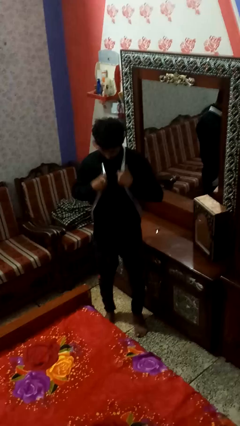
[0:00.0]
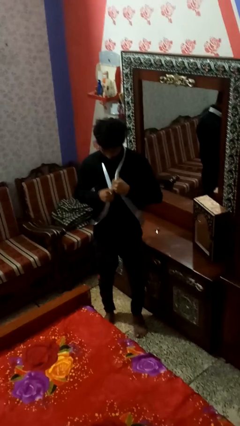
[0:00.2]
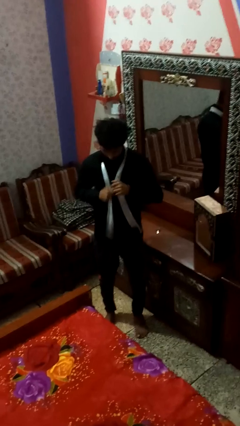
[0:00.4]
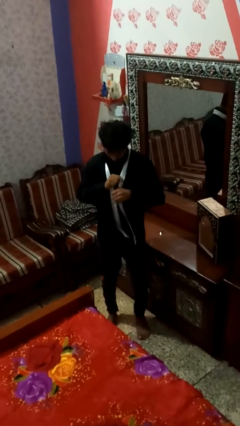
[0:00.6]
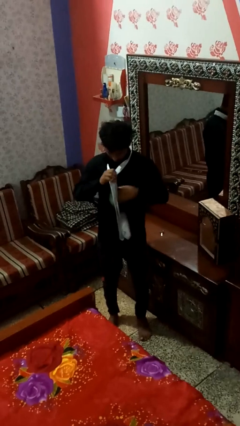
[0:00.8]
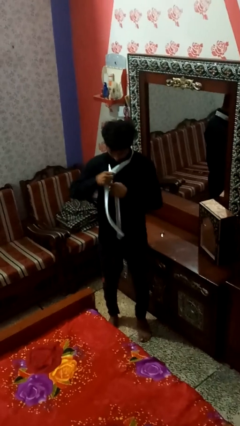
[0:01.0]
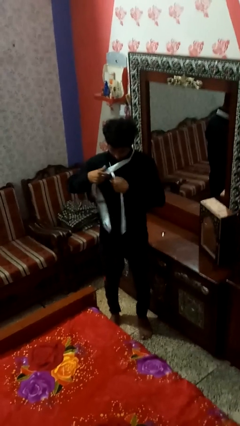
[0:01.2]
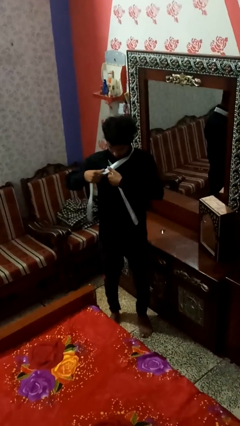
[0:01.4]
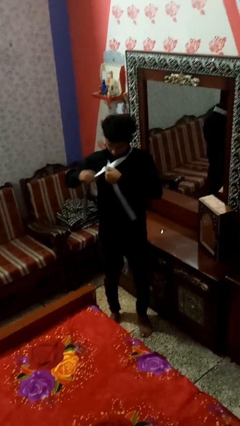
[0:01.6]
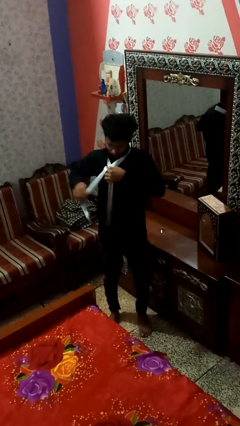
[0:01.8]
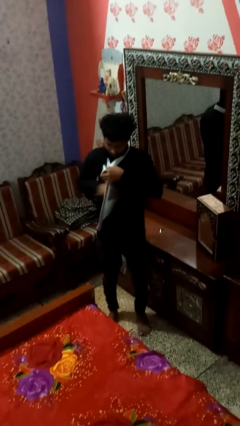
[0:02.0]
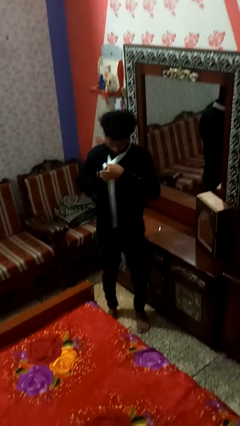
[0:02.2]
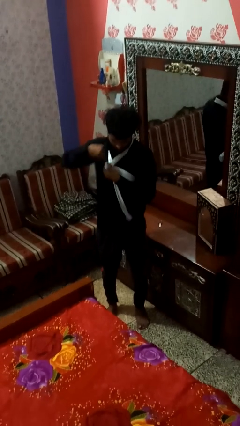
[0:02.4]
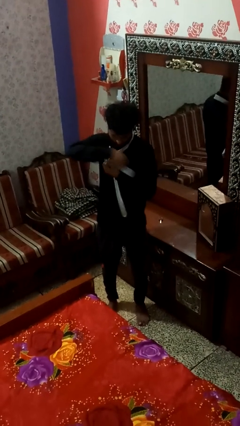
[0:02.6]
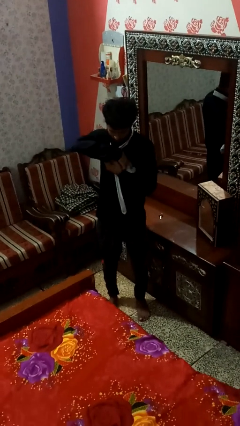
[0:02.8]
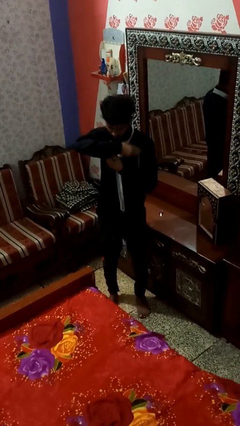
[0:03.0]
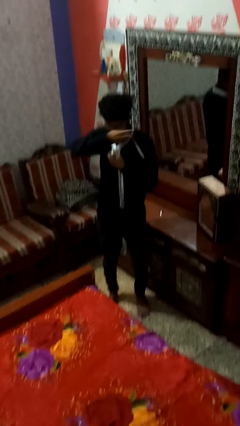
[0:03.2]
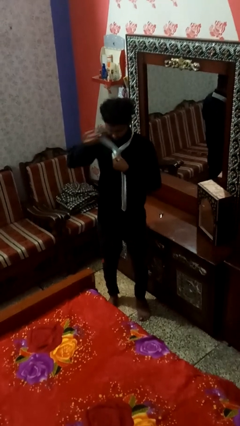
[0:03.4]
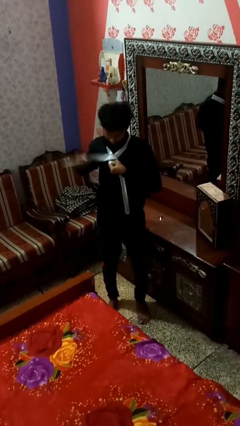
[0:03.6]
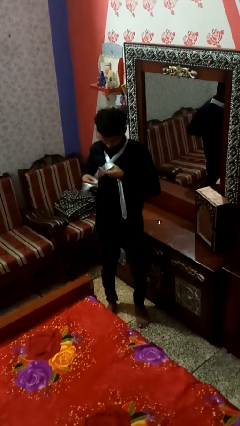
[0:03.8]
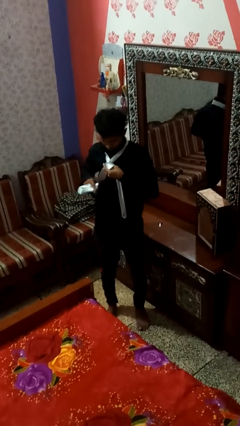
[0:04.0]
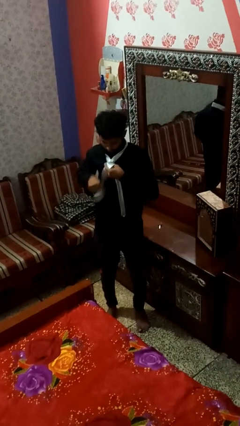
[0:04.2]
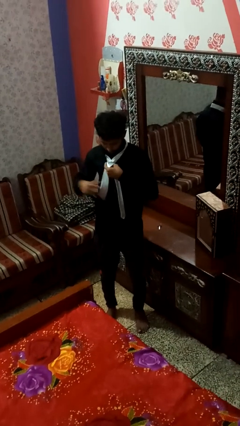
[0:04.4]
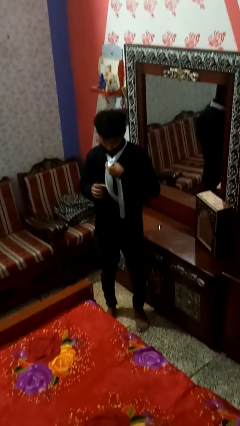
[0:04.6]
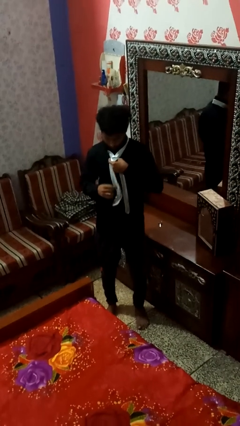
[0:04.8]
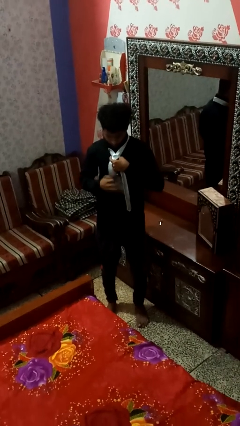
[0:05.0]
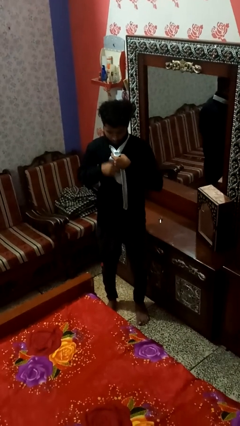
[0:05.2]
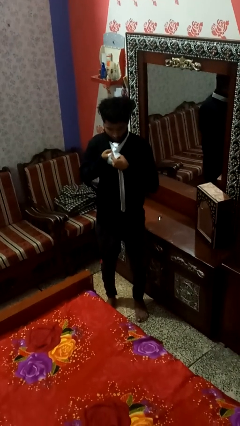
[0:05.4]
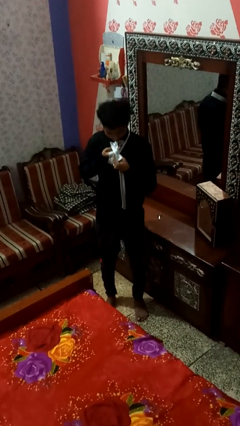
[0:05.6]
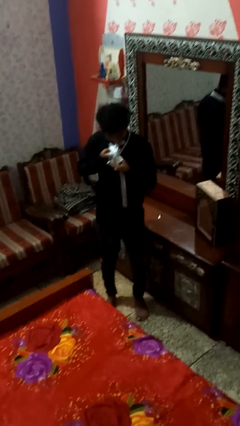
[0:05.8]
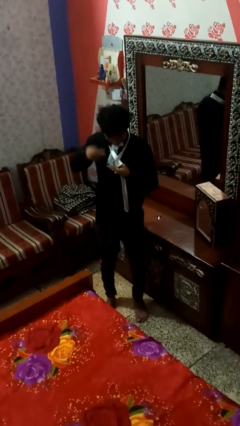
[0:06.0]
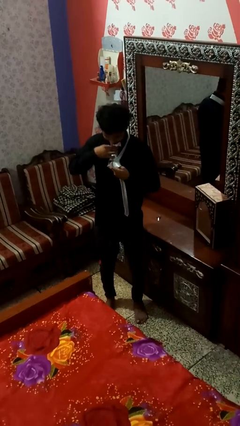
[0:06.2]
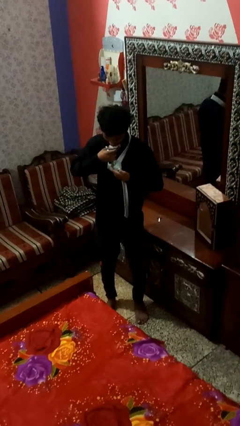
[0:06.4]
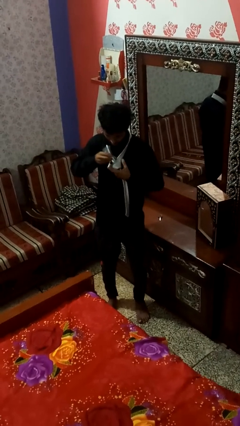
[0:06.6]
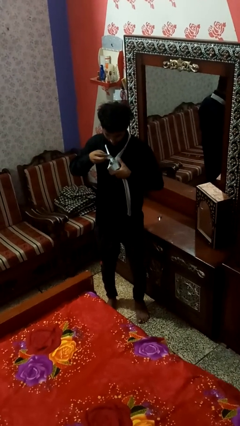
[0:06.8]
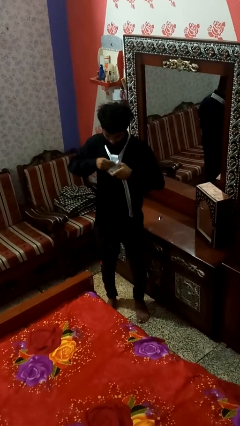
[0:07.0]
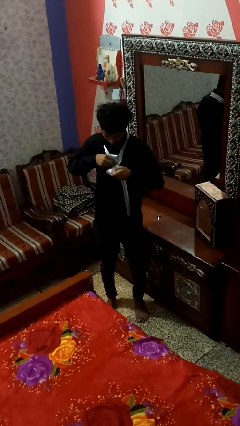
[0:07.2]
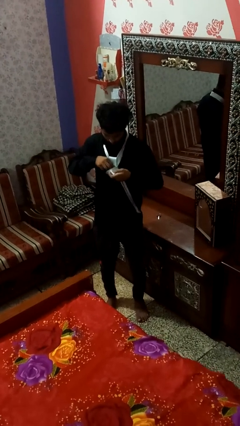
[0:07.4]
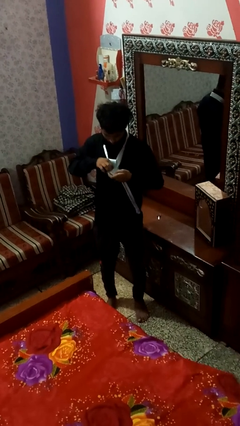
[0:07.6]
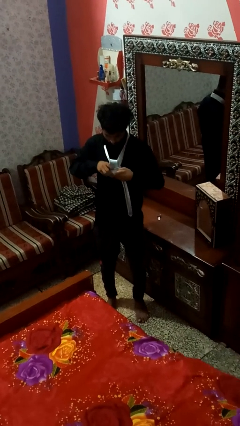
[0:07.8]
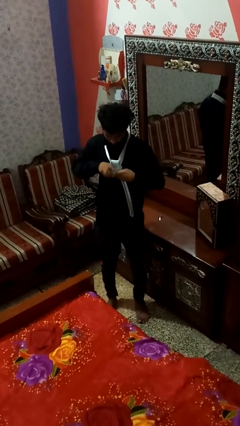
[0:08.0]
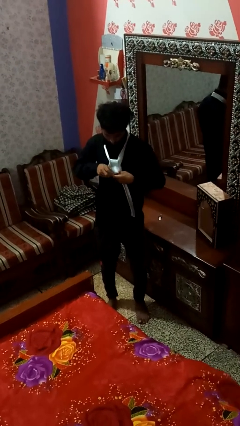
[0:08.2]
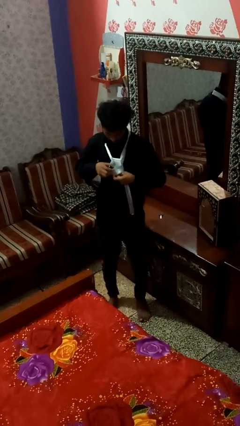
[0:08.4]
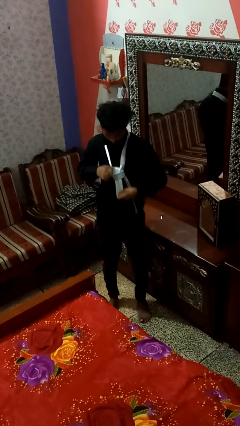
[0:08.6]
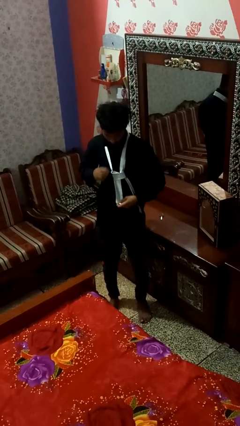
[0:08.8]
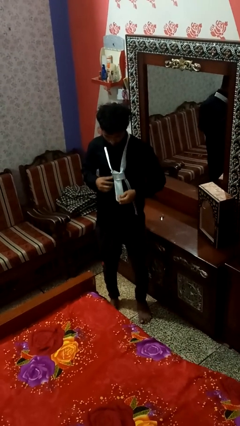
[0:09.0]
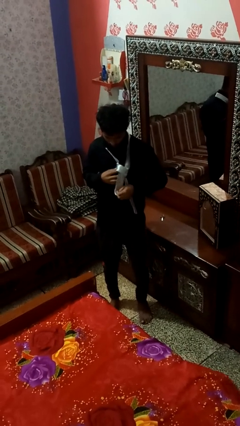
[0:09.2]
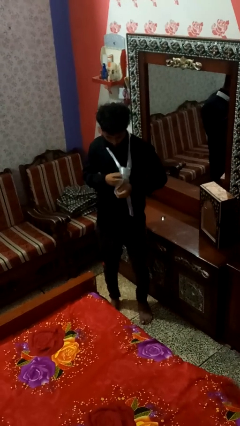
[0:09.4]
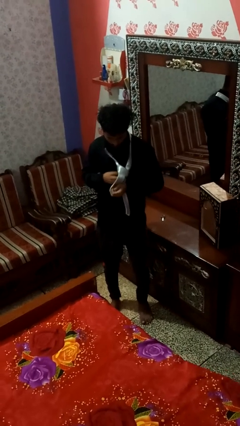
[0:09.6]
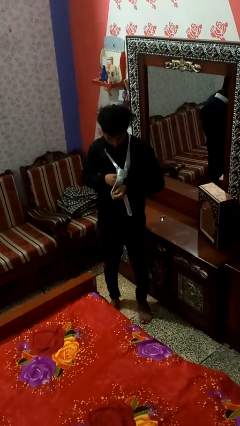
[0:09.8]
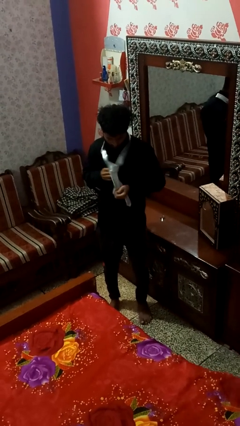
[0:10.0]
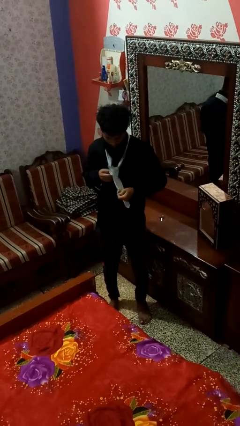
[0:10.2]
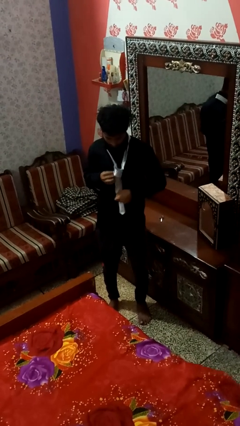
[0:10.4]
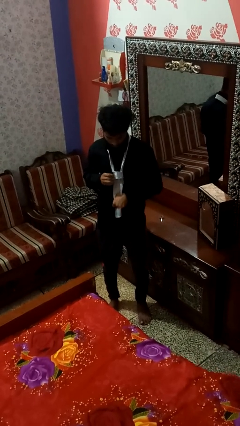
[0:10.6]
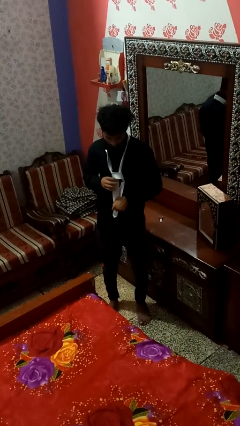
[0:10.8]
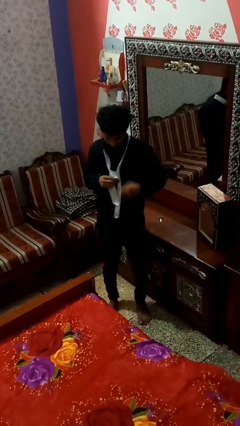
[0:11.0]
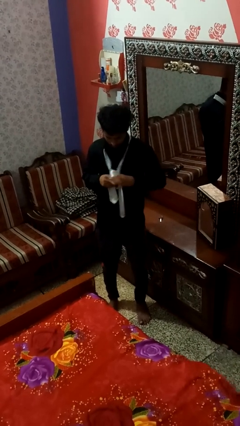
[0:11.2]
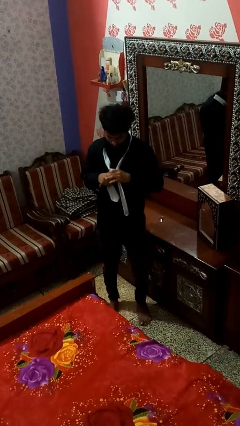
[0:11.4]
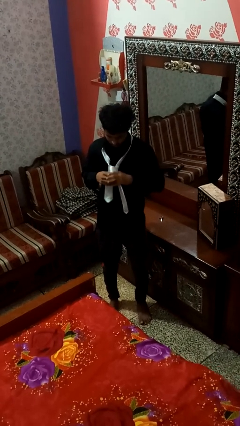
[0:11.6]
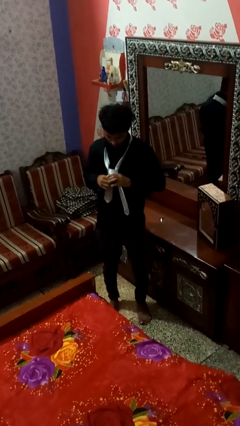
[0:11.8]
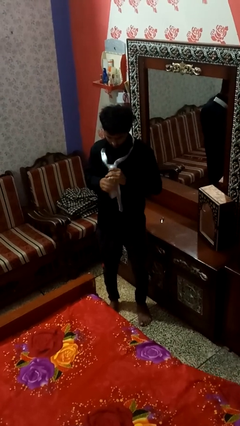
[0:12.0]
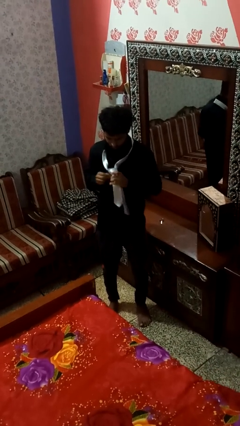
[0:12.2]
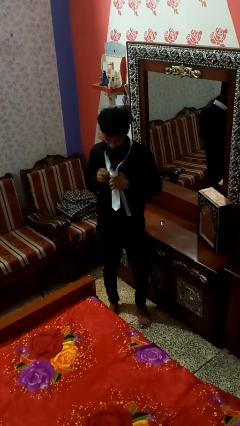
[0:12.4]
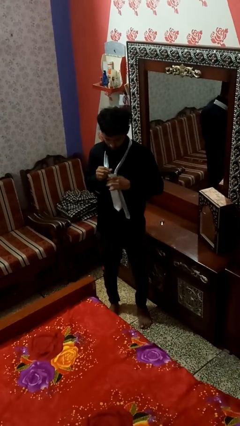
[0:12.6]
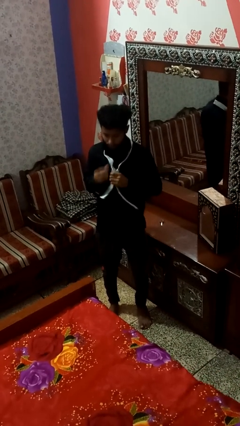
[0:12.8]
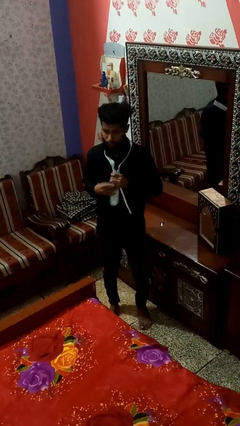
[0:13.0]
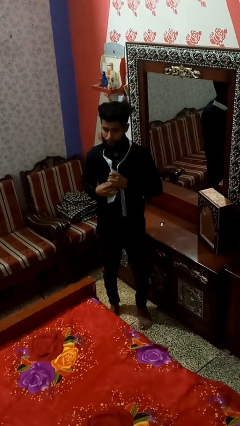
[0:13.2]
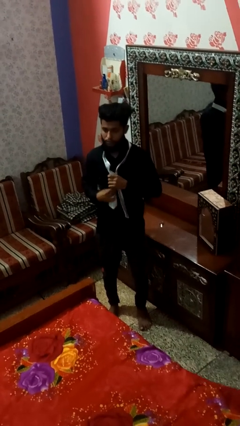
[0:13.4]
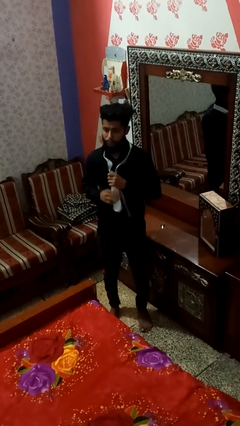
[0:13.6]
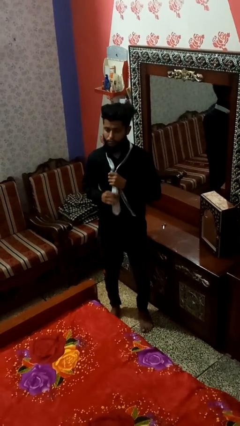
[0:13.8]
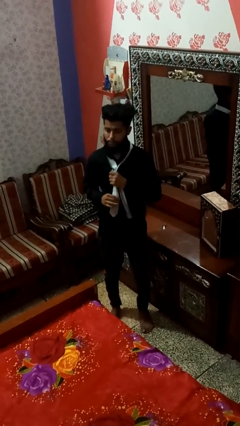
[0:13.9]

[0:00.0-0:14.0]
person puts on necktie

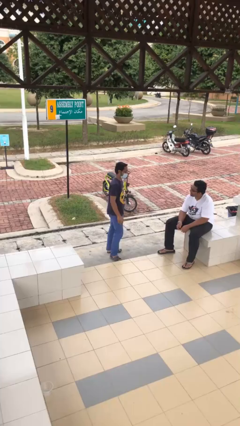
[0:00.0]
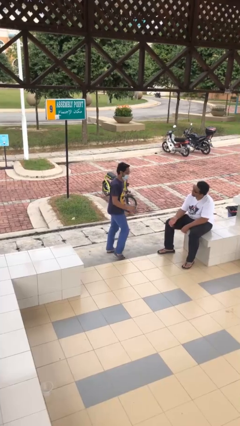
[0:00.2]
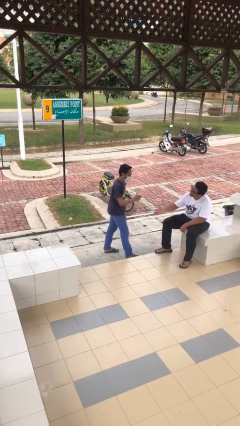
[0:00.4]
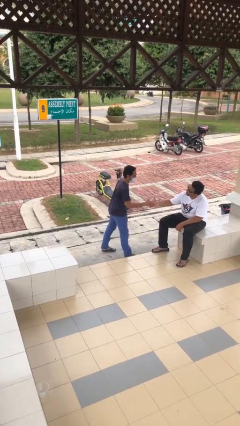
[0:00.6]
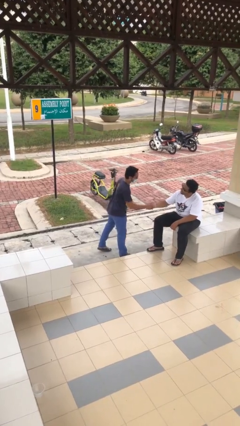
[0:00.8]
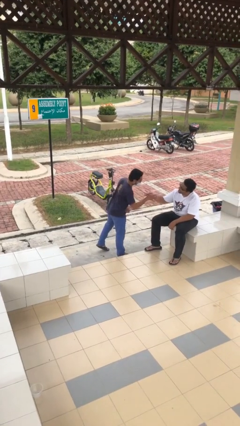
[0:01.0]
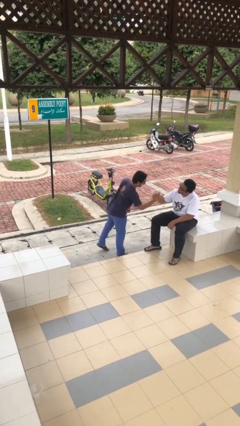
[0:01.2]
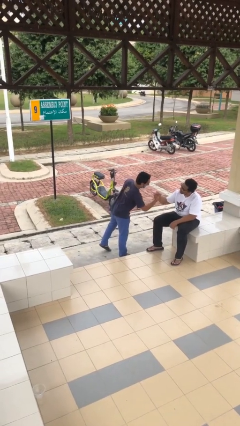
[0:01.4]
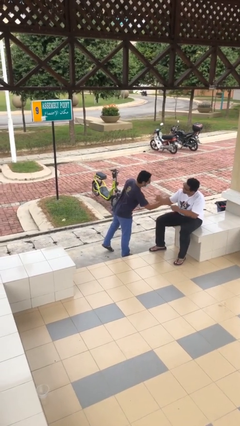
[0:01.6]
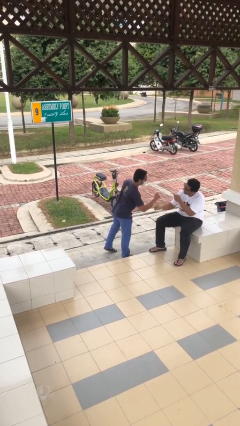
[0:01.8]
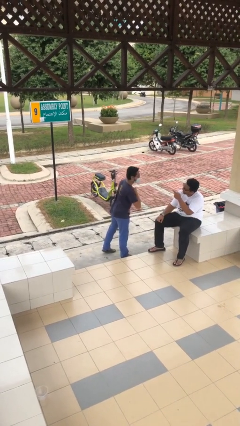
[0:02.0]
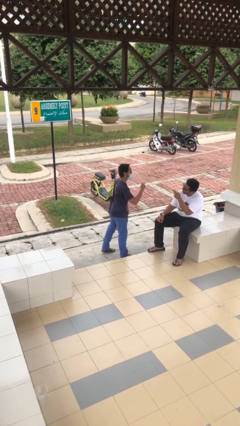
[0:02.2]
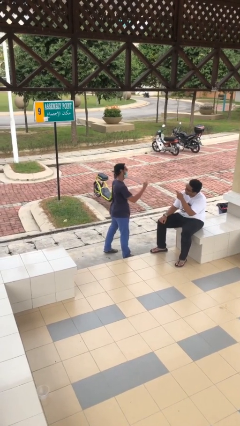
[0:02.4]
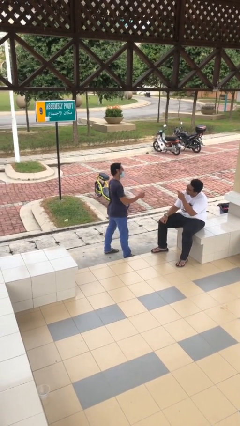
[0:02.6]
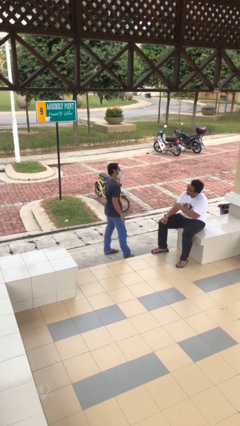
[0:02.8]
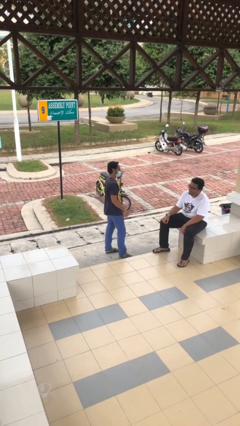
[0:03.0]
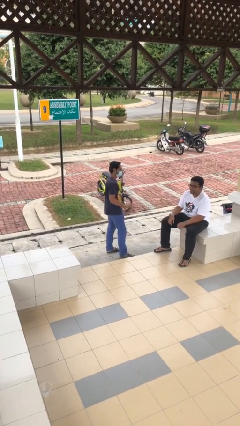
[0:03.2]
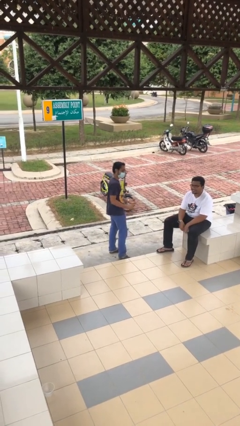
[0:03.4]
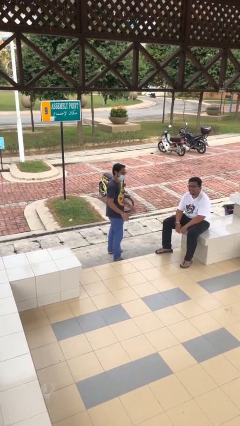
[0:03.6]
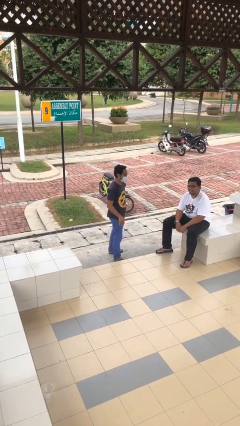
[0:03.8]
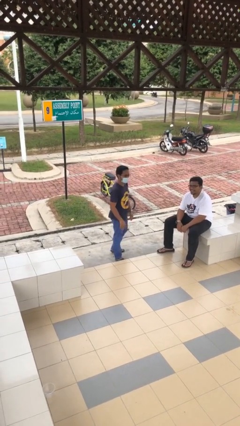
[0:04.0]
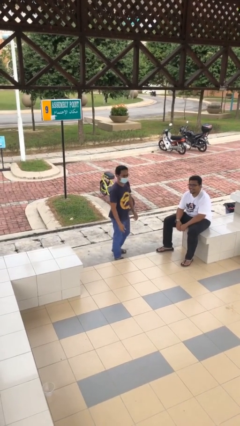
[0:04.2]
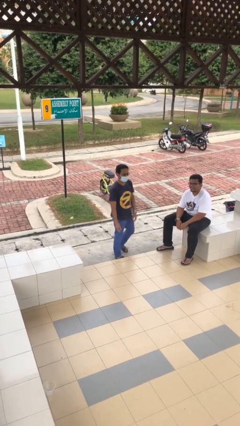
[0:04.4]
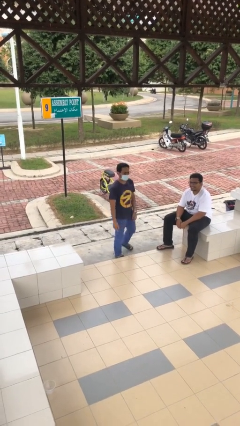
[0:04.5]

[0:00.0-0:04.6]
person shakes hand
